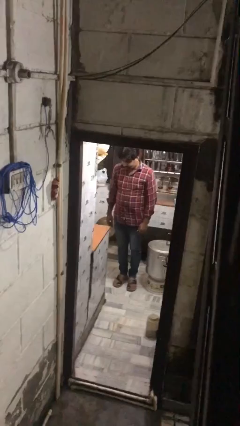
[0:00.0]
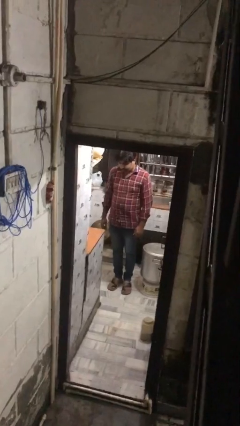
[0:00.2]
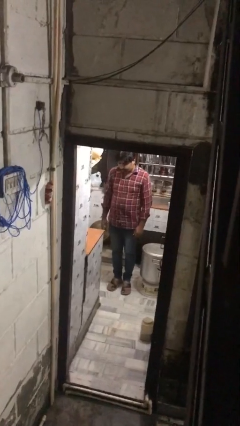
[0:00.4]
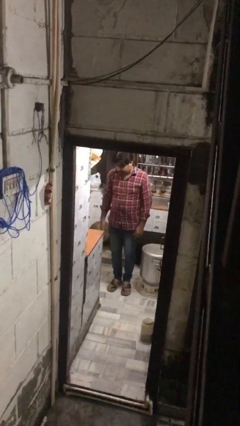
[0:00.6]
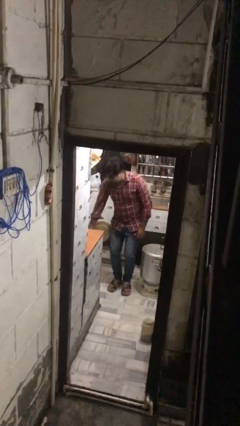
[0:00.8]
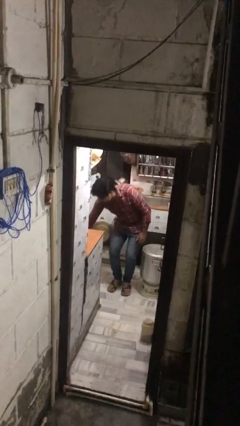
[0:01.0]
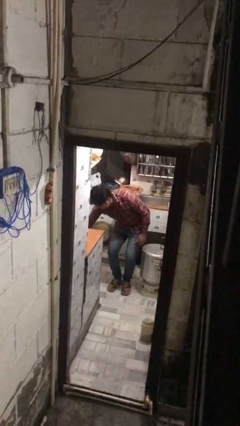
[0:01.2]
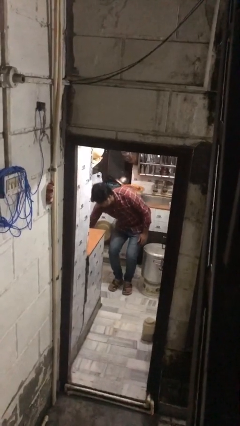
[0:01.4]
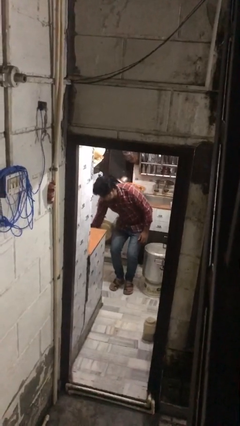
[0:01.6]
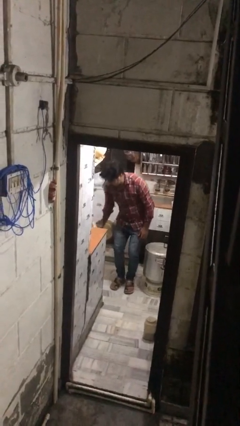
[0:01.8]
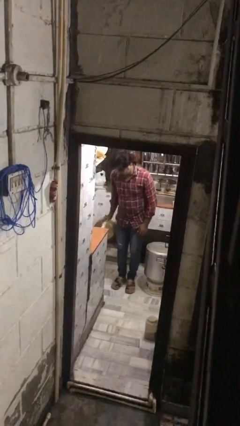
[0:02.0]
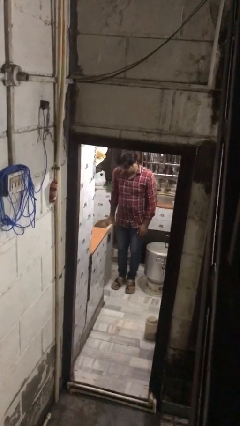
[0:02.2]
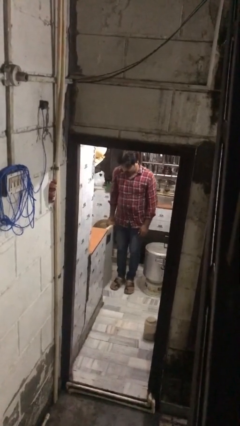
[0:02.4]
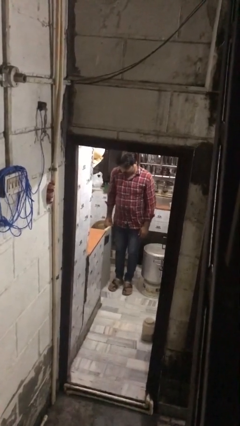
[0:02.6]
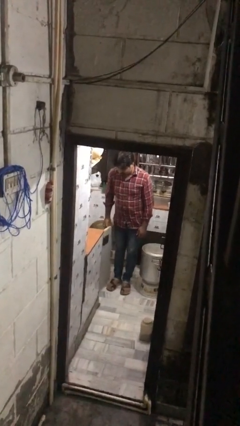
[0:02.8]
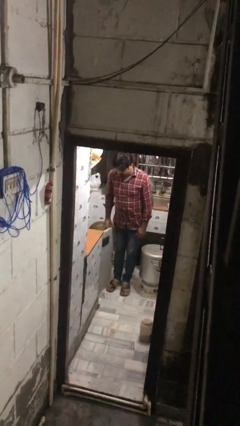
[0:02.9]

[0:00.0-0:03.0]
person opens kitchen drawer

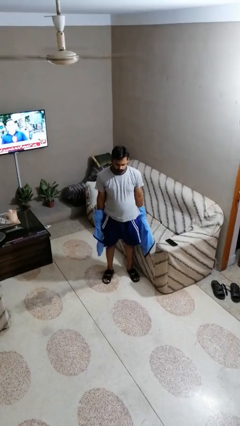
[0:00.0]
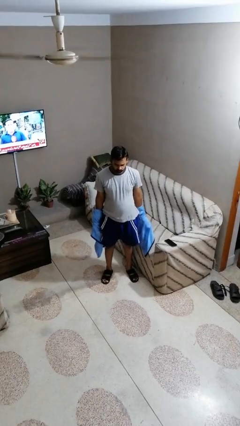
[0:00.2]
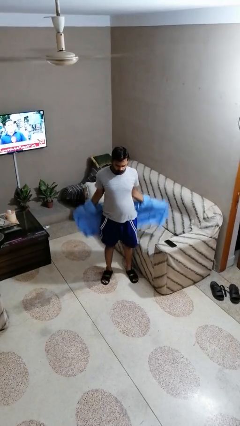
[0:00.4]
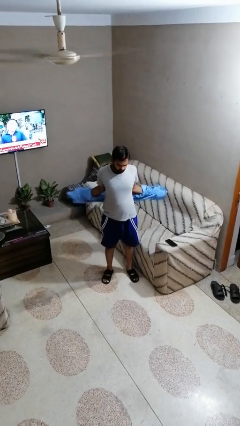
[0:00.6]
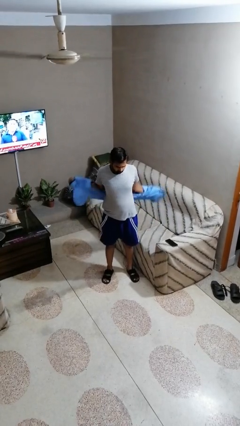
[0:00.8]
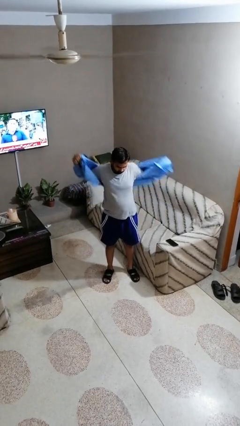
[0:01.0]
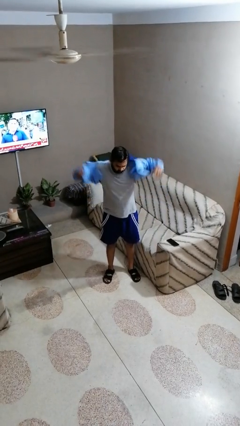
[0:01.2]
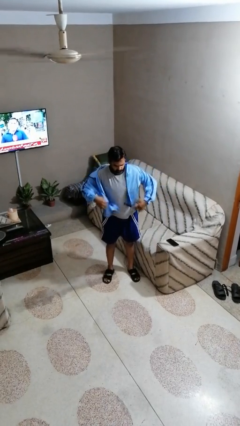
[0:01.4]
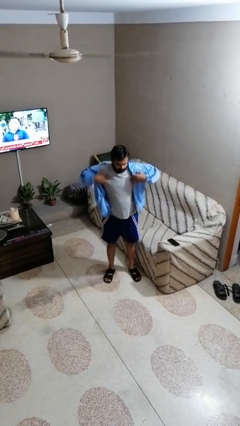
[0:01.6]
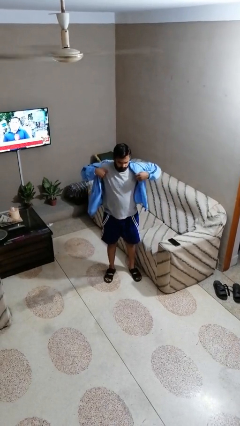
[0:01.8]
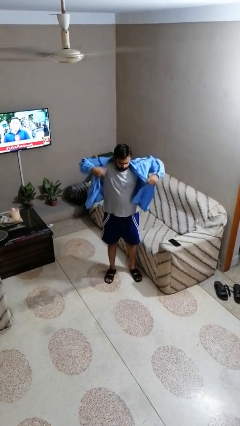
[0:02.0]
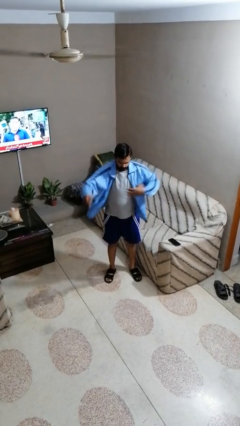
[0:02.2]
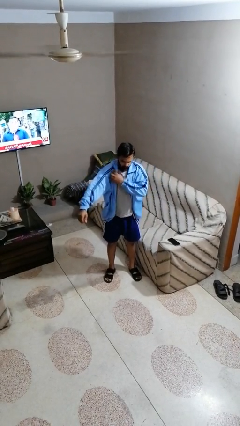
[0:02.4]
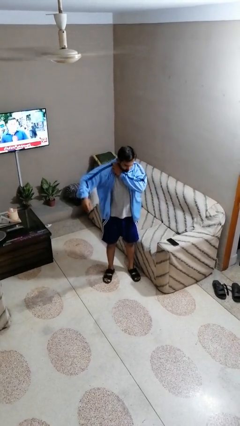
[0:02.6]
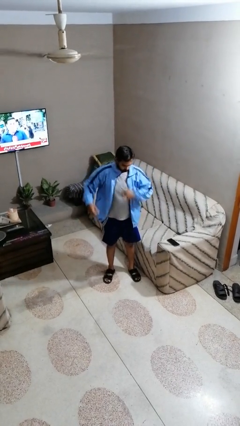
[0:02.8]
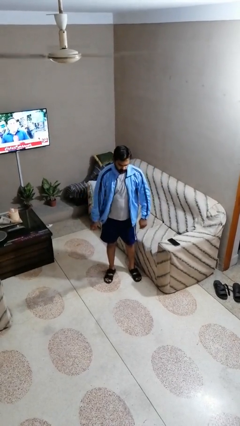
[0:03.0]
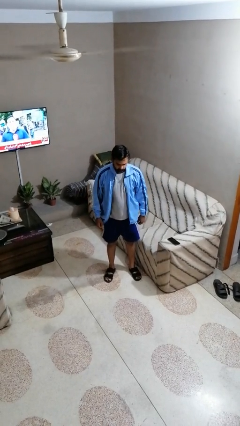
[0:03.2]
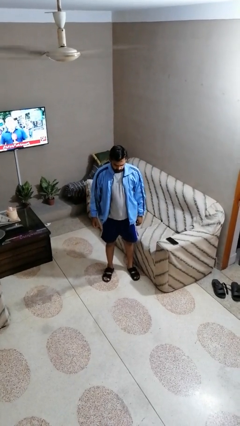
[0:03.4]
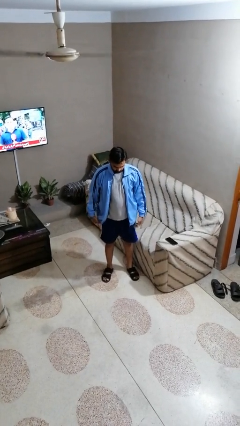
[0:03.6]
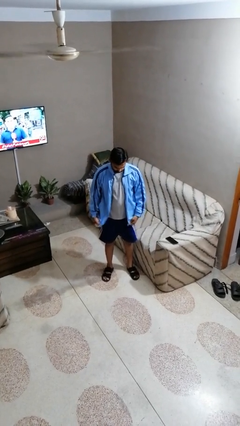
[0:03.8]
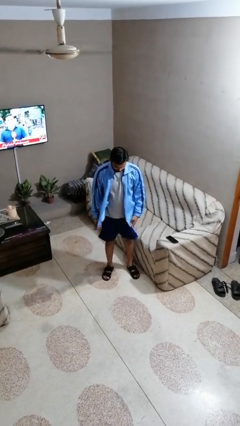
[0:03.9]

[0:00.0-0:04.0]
person puts on jacket

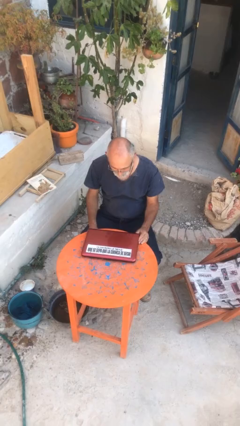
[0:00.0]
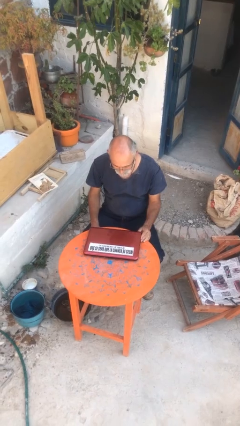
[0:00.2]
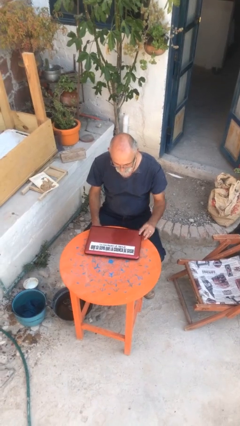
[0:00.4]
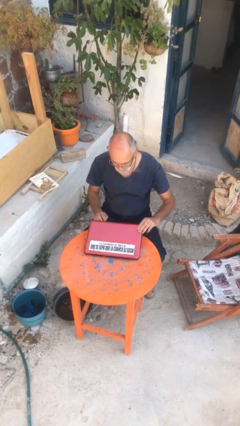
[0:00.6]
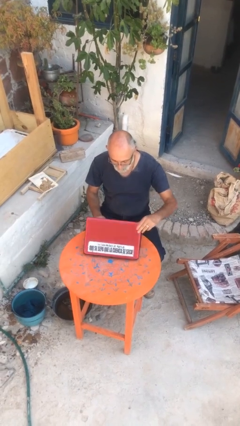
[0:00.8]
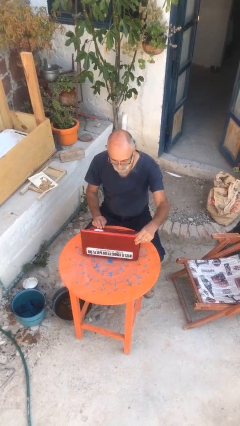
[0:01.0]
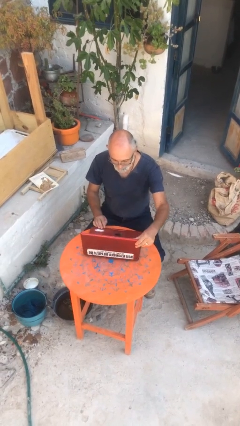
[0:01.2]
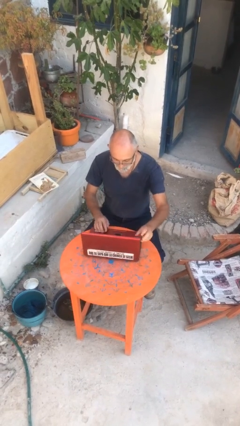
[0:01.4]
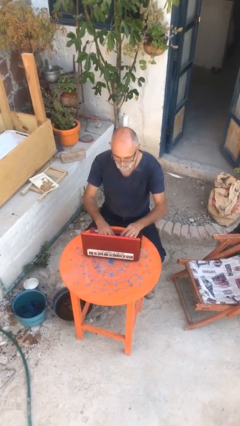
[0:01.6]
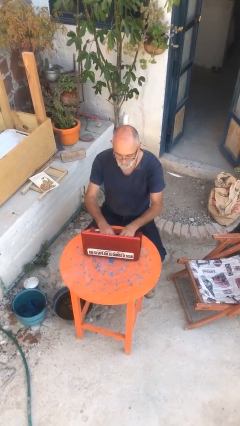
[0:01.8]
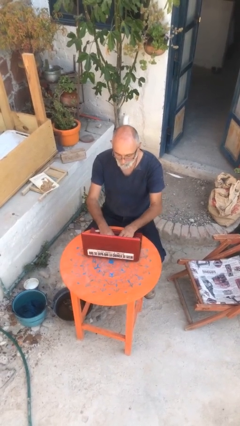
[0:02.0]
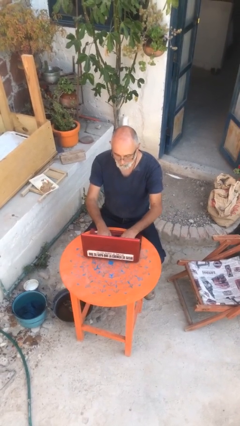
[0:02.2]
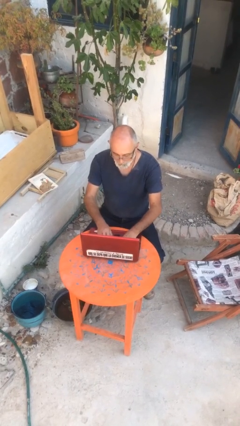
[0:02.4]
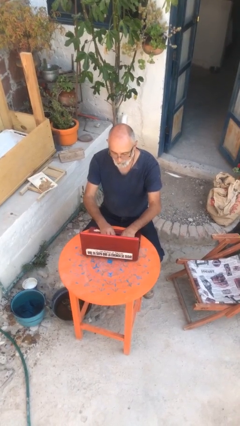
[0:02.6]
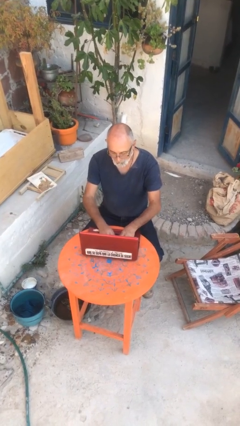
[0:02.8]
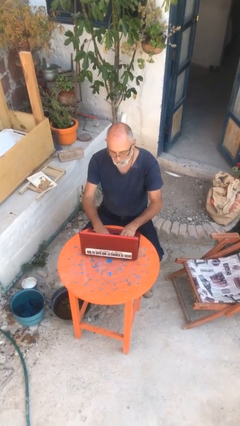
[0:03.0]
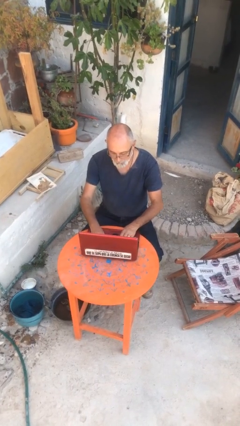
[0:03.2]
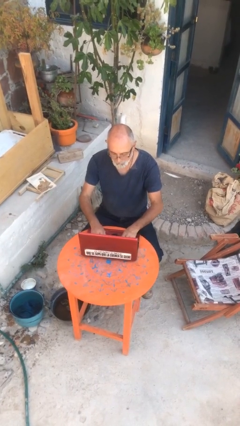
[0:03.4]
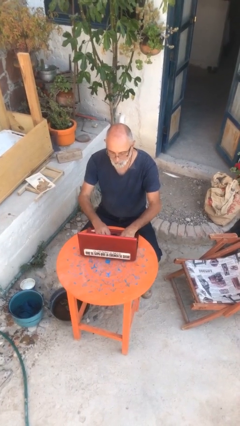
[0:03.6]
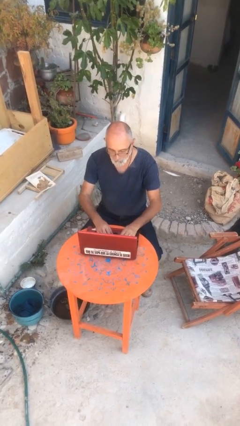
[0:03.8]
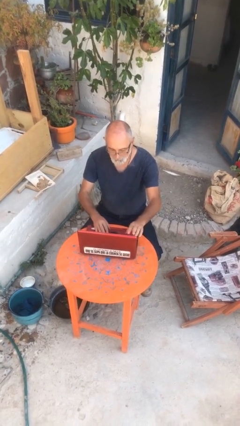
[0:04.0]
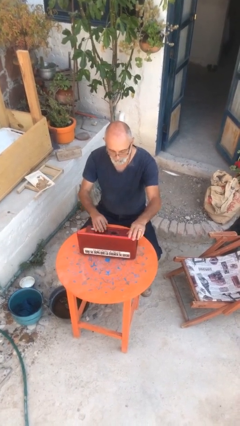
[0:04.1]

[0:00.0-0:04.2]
person interacts with laptop

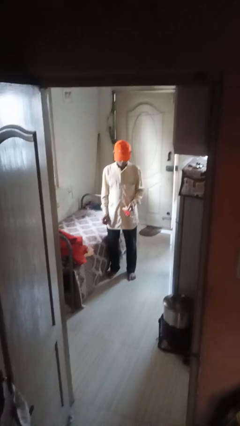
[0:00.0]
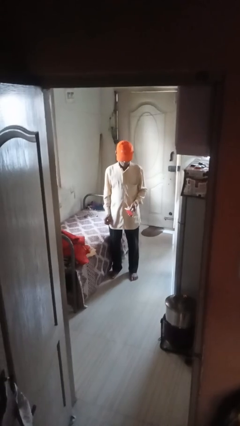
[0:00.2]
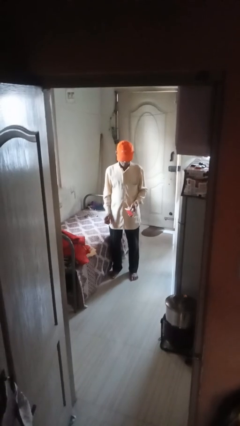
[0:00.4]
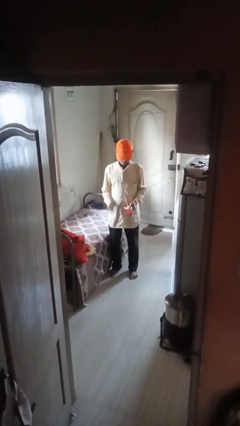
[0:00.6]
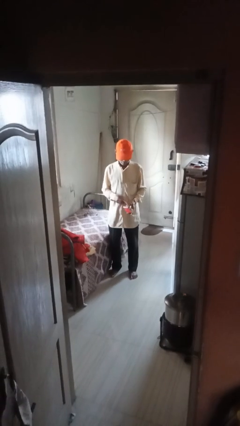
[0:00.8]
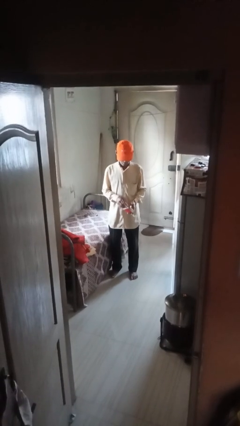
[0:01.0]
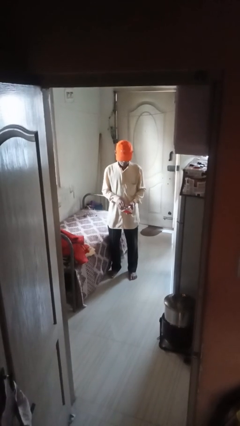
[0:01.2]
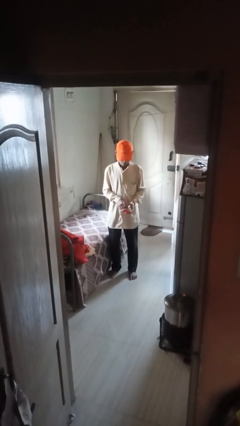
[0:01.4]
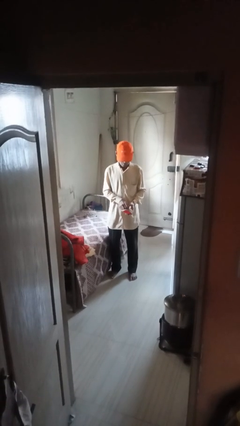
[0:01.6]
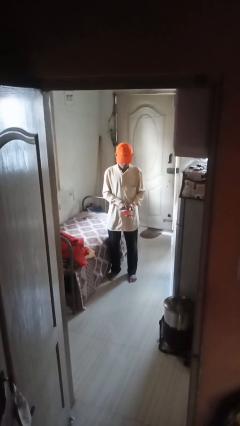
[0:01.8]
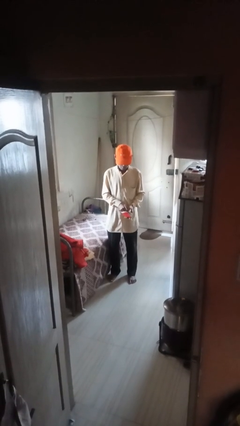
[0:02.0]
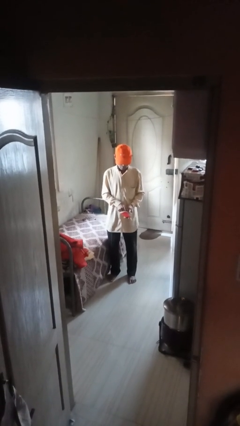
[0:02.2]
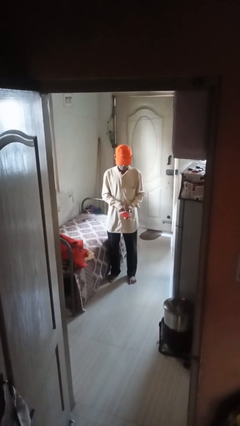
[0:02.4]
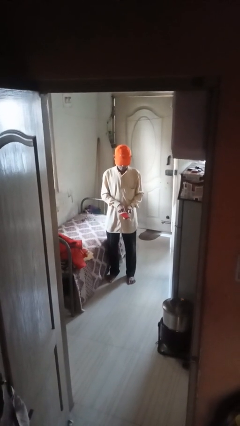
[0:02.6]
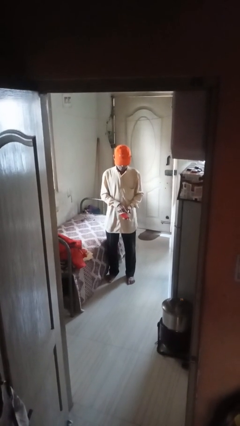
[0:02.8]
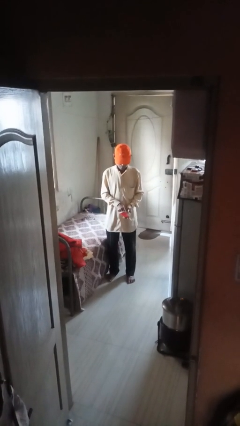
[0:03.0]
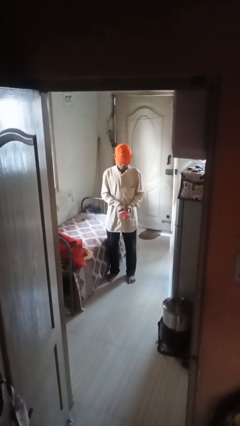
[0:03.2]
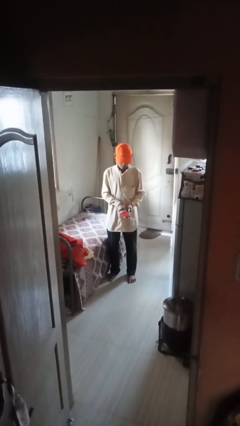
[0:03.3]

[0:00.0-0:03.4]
person searches in purse

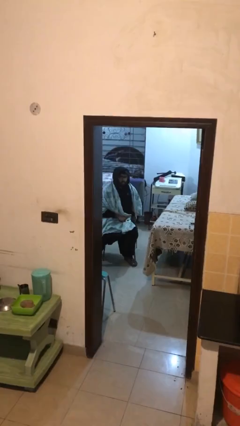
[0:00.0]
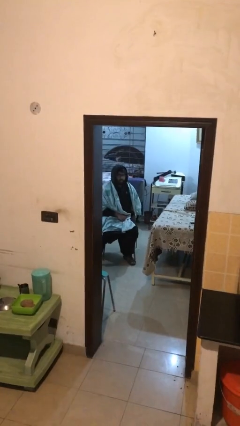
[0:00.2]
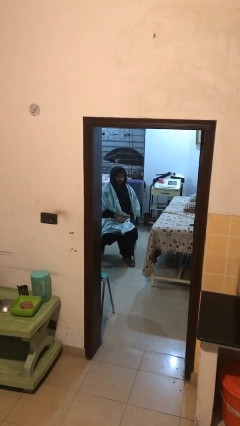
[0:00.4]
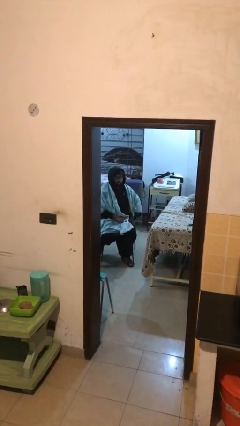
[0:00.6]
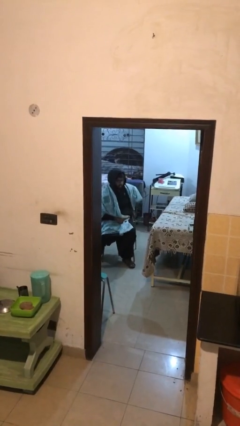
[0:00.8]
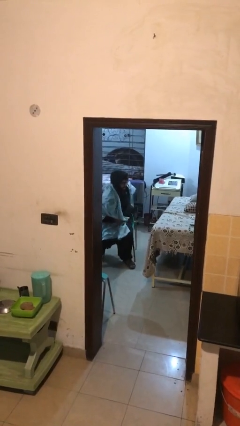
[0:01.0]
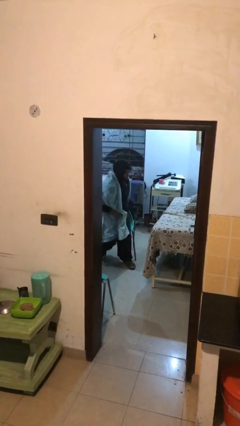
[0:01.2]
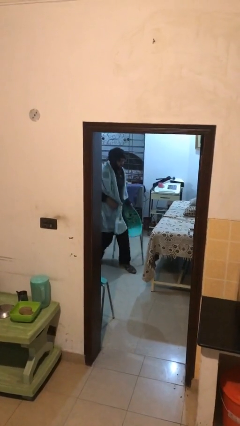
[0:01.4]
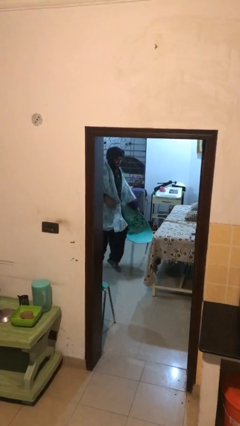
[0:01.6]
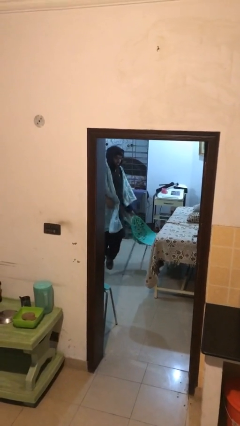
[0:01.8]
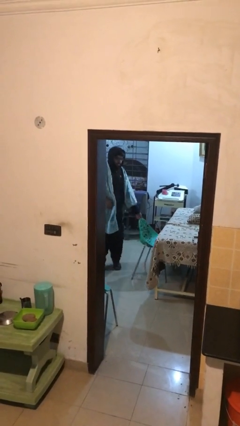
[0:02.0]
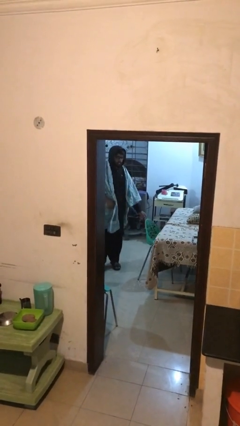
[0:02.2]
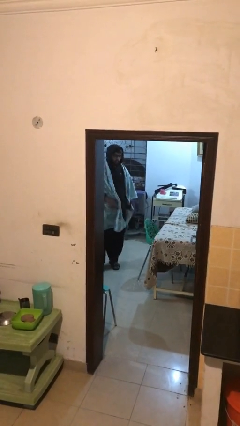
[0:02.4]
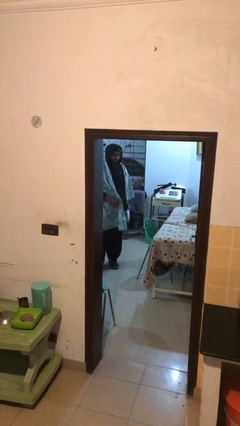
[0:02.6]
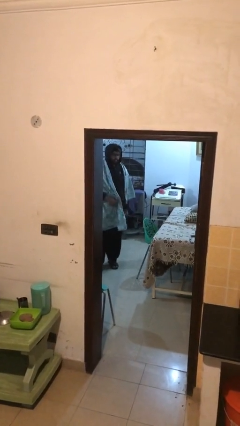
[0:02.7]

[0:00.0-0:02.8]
person stands up
